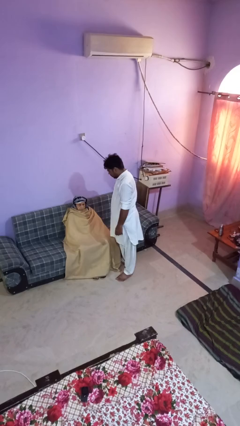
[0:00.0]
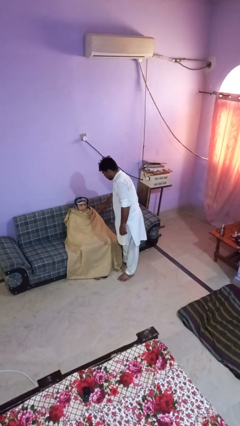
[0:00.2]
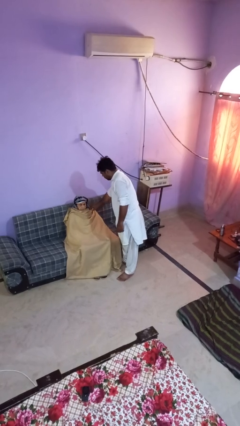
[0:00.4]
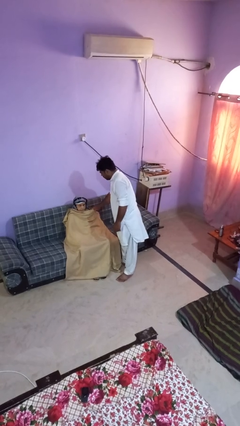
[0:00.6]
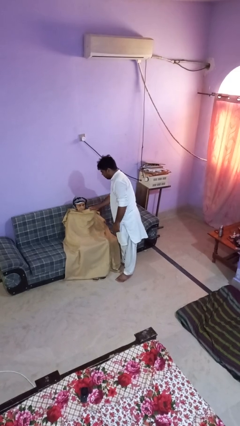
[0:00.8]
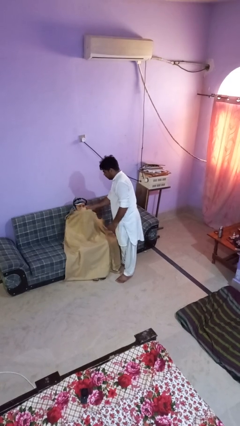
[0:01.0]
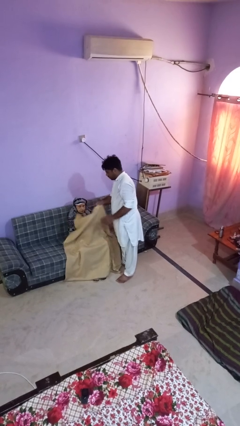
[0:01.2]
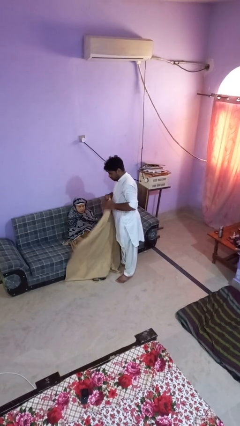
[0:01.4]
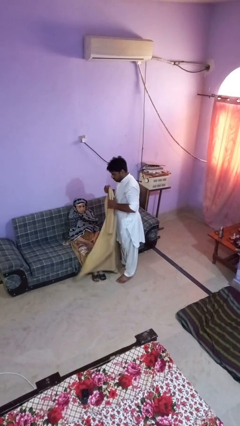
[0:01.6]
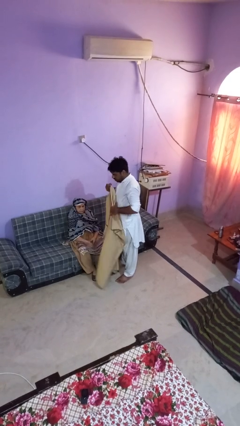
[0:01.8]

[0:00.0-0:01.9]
person uncovers friend with blanket

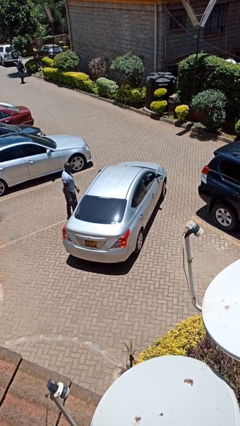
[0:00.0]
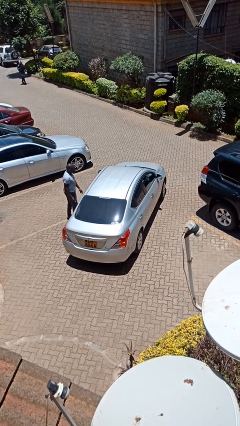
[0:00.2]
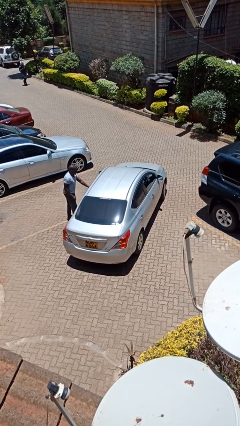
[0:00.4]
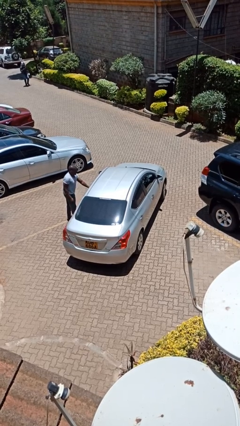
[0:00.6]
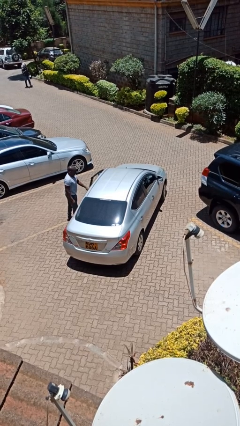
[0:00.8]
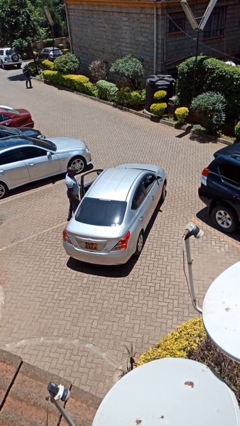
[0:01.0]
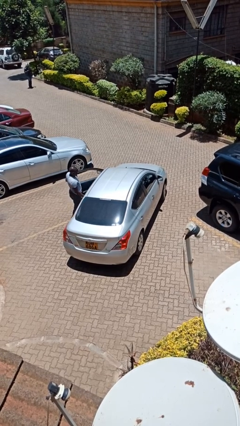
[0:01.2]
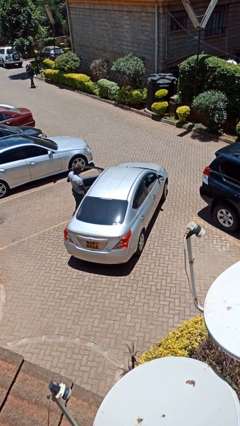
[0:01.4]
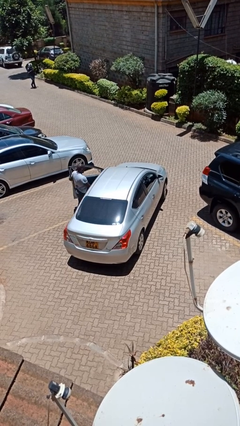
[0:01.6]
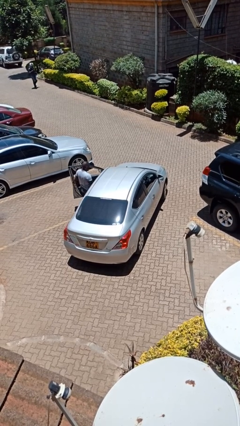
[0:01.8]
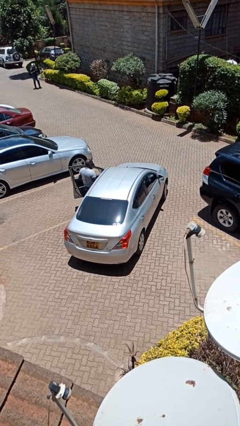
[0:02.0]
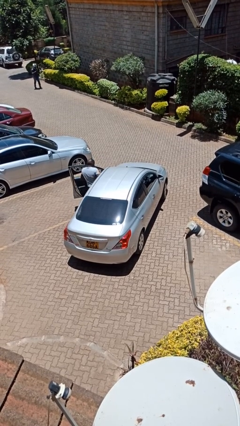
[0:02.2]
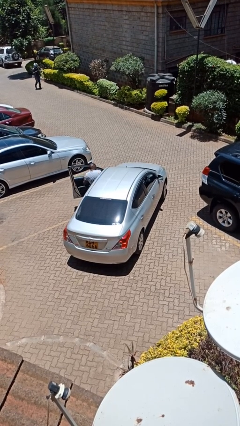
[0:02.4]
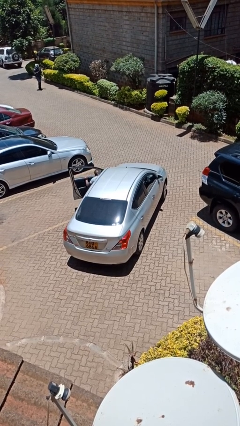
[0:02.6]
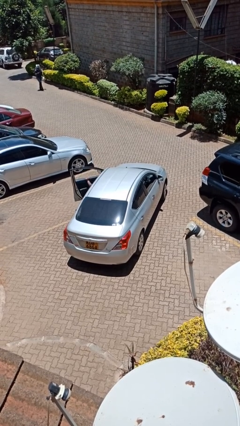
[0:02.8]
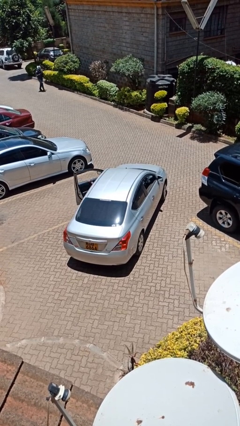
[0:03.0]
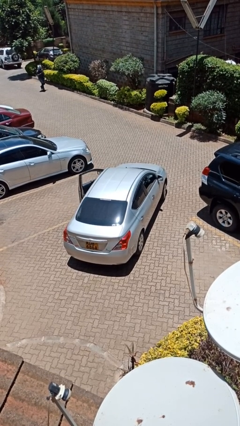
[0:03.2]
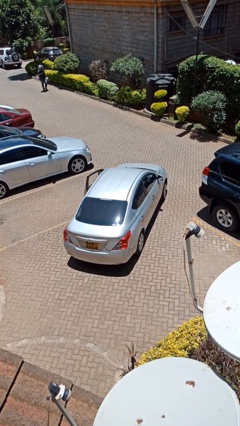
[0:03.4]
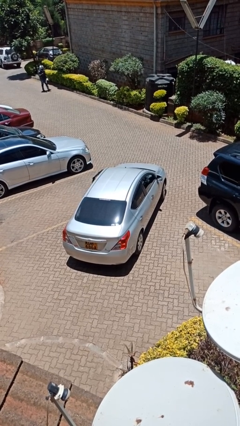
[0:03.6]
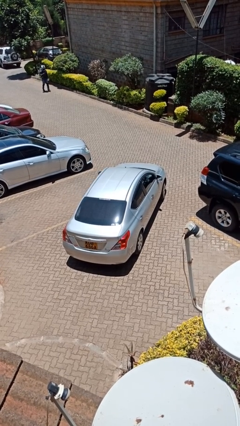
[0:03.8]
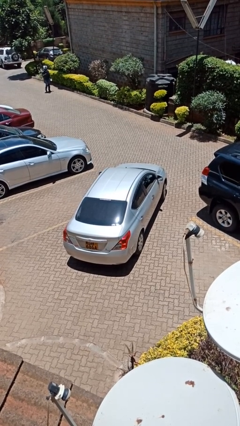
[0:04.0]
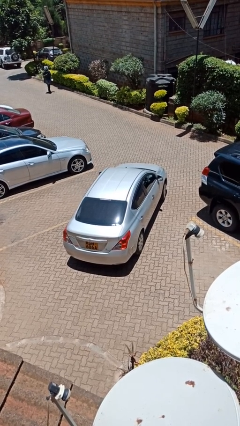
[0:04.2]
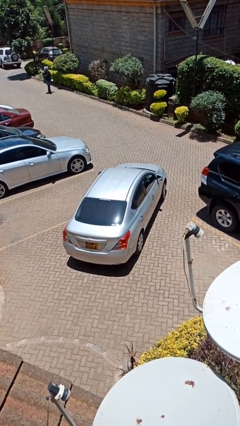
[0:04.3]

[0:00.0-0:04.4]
car picks up person

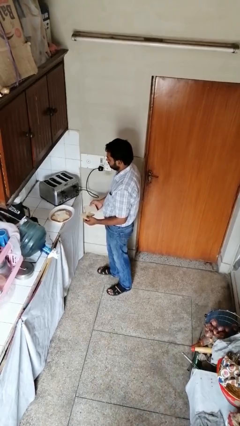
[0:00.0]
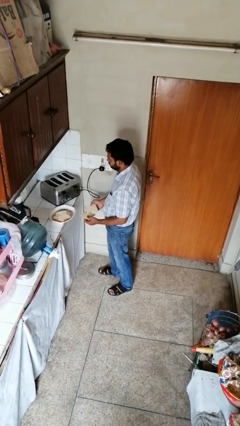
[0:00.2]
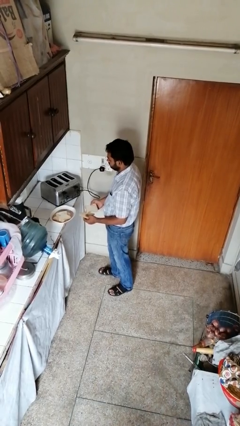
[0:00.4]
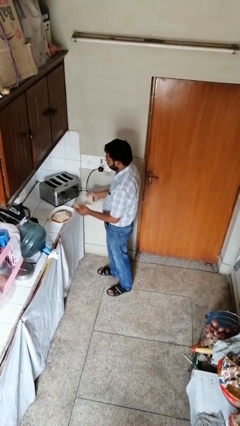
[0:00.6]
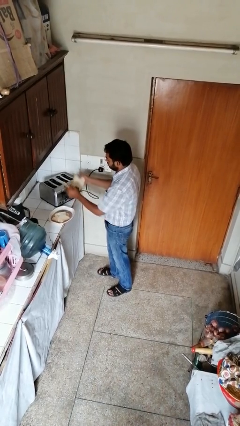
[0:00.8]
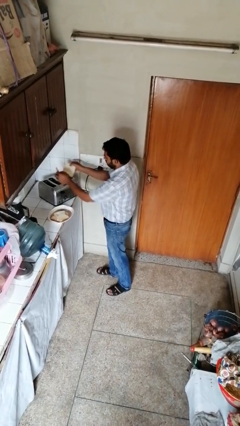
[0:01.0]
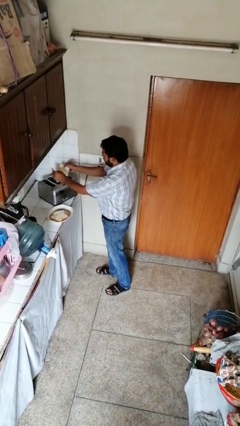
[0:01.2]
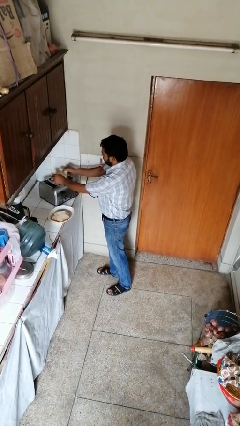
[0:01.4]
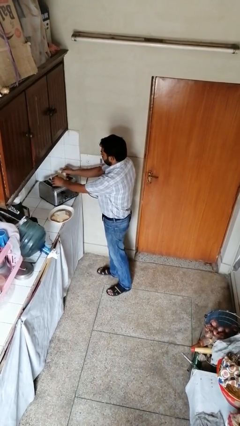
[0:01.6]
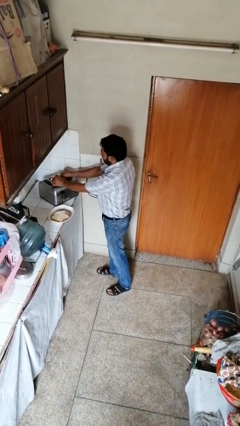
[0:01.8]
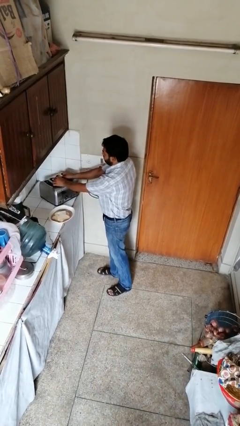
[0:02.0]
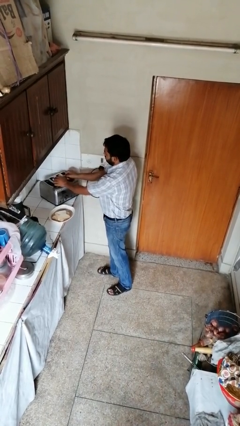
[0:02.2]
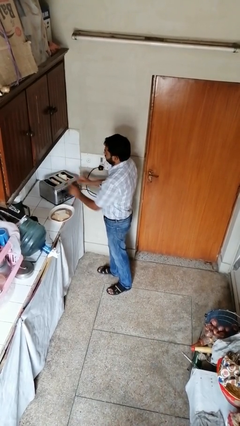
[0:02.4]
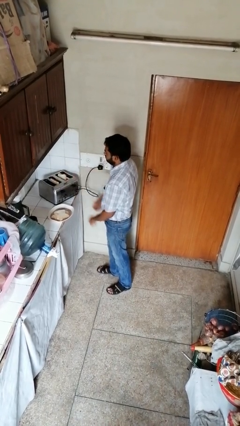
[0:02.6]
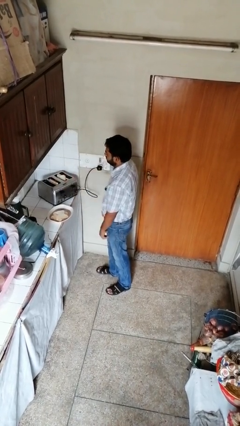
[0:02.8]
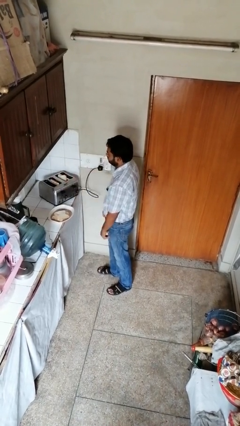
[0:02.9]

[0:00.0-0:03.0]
person puts object into toaster

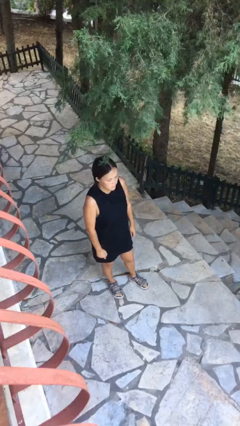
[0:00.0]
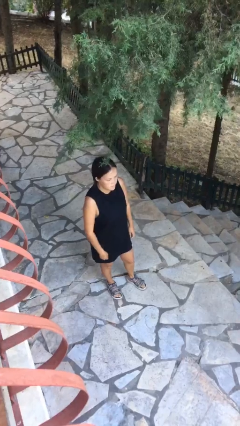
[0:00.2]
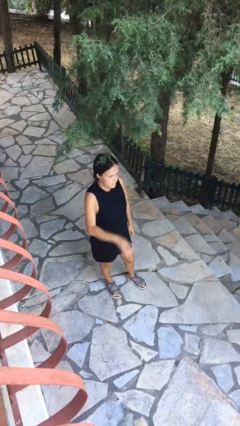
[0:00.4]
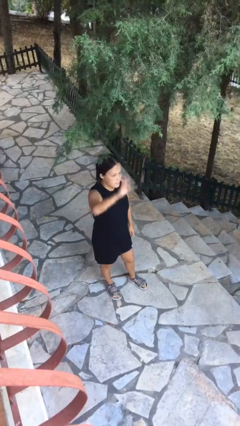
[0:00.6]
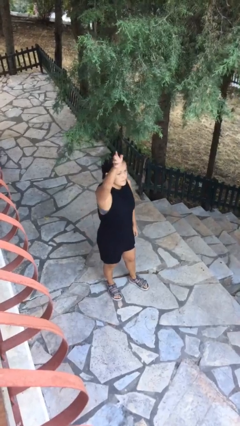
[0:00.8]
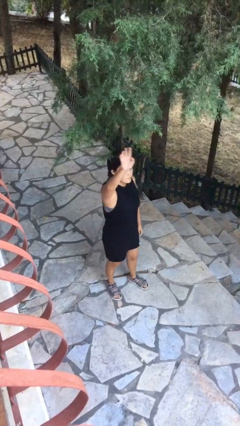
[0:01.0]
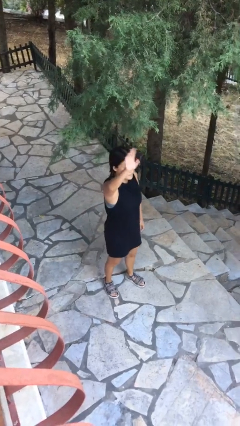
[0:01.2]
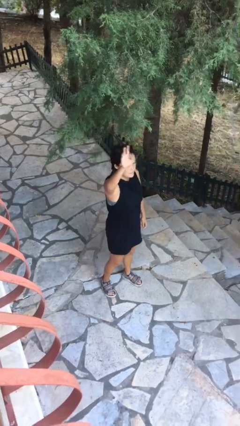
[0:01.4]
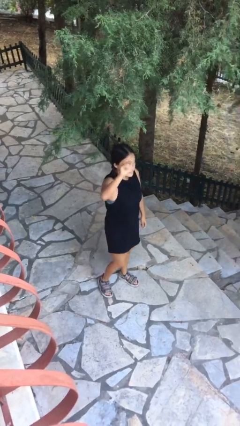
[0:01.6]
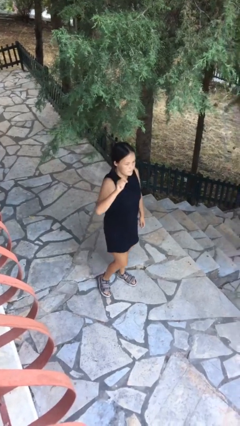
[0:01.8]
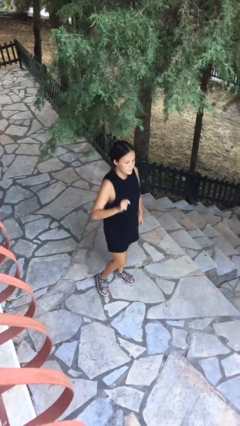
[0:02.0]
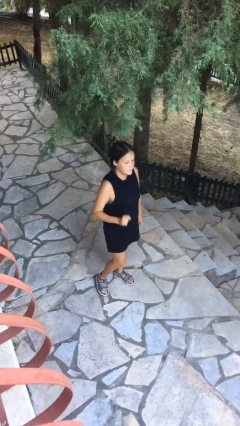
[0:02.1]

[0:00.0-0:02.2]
person gestures raise hand

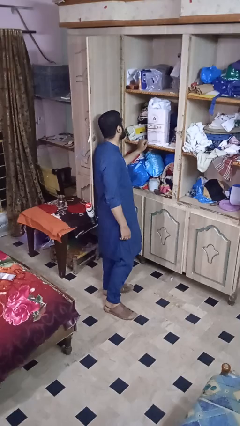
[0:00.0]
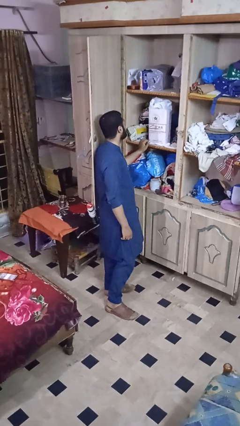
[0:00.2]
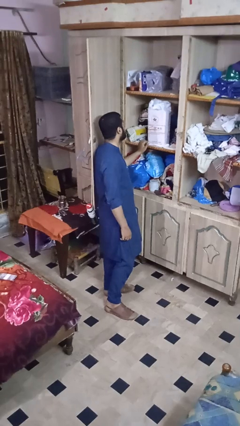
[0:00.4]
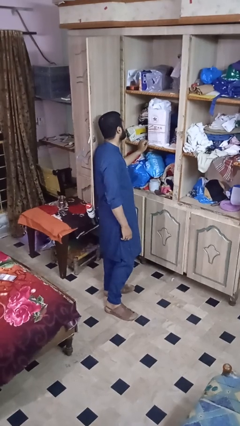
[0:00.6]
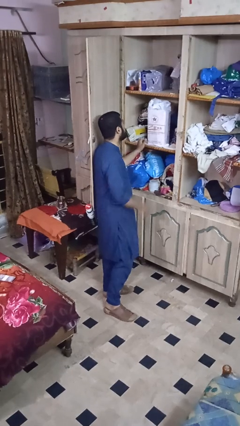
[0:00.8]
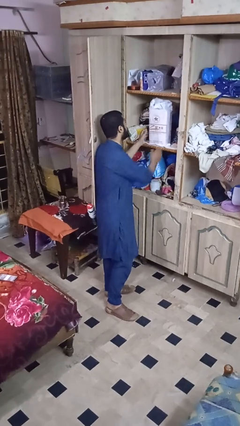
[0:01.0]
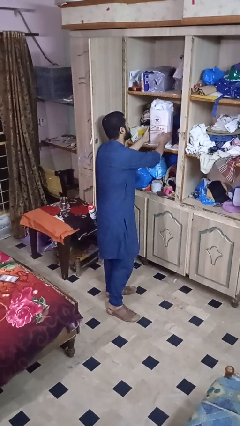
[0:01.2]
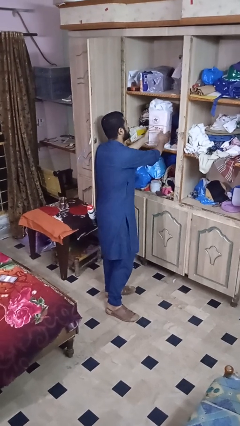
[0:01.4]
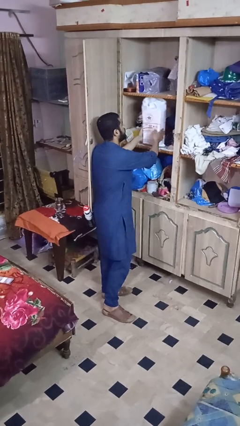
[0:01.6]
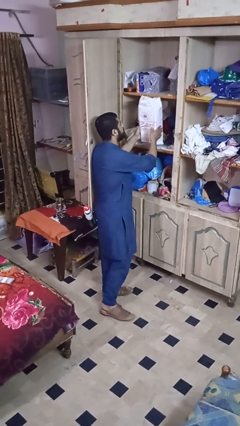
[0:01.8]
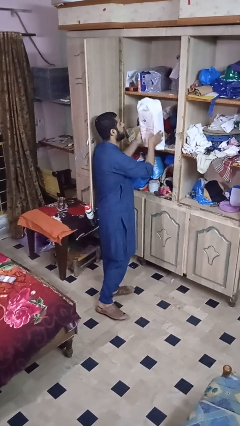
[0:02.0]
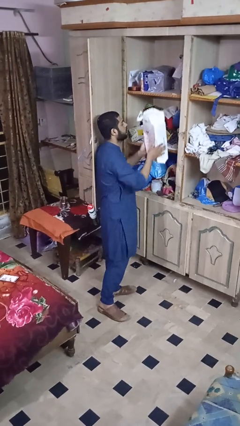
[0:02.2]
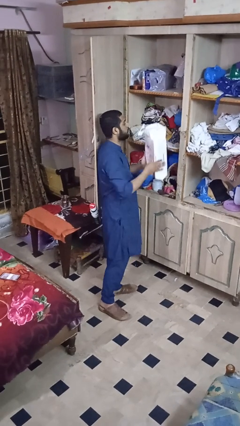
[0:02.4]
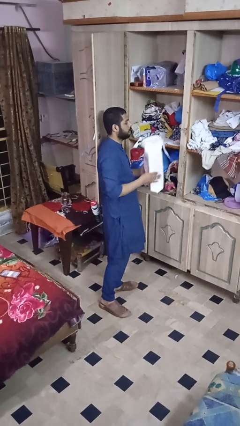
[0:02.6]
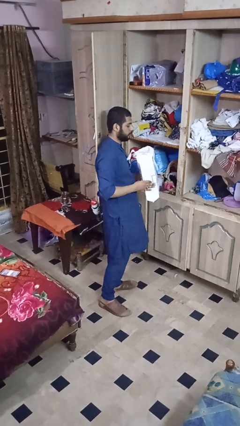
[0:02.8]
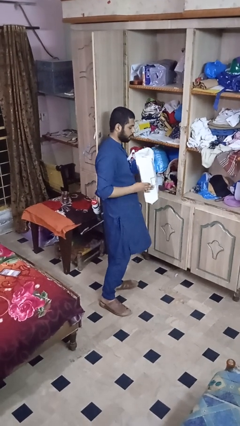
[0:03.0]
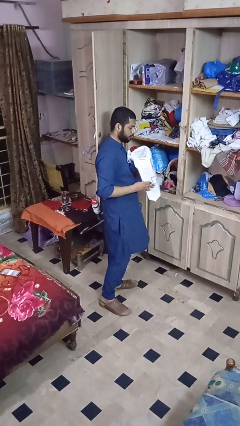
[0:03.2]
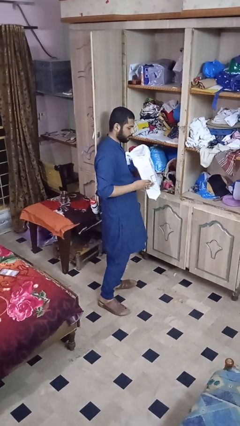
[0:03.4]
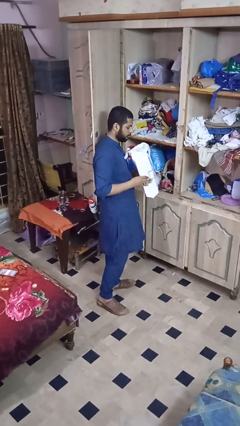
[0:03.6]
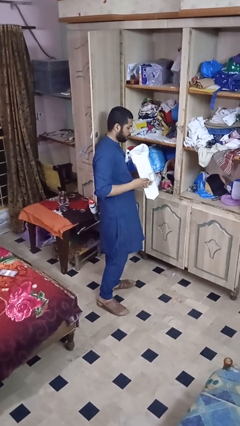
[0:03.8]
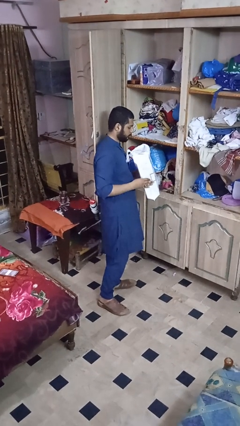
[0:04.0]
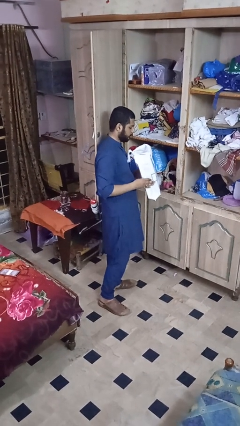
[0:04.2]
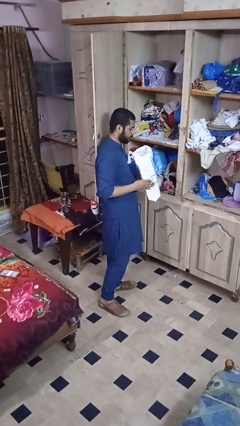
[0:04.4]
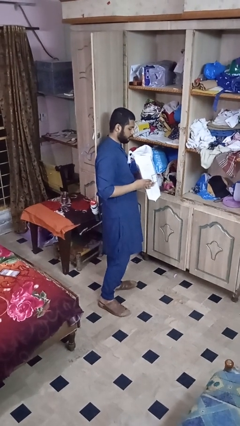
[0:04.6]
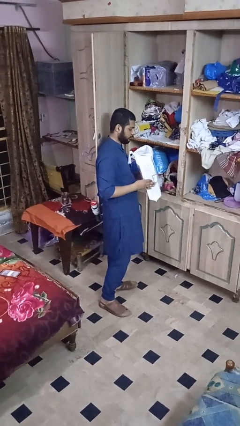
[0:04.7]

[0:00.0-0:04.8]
person picks up object from cabinet

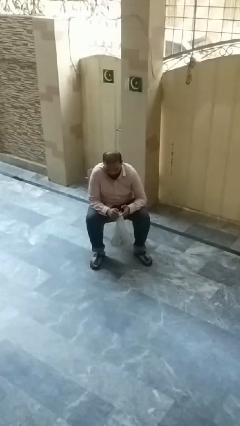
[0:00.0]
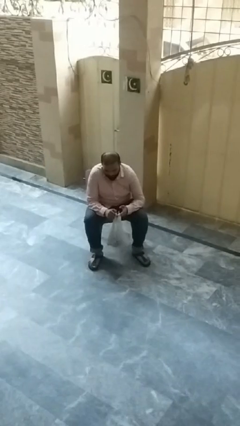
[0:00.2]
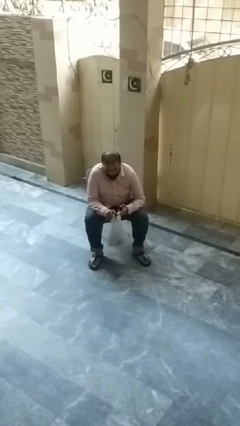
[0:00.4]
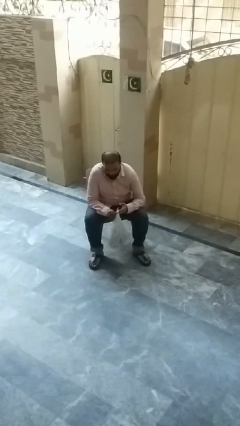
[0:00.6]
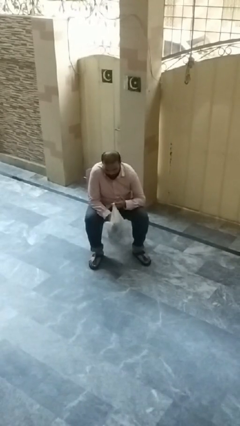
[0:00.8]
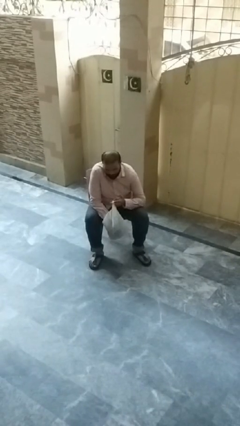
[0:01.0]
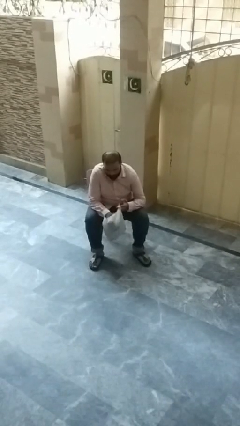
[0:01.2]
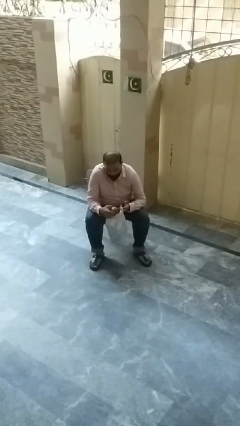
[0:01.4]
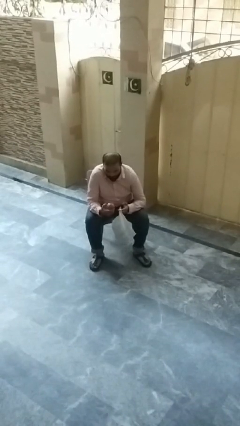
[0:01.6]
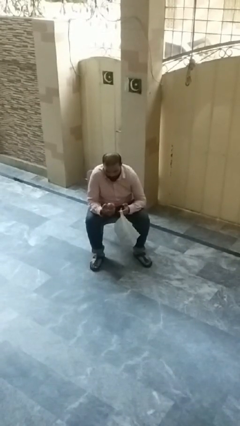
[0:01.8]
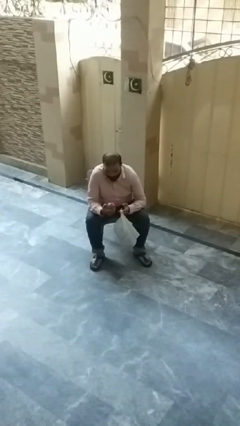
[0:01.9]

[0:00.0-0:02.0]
person takes object from bag
